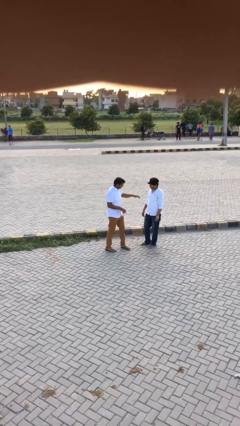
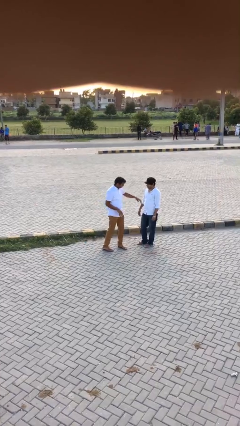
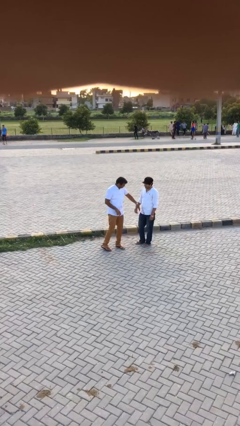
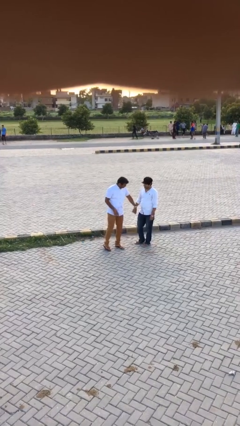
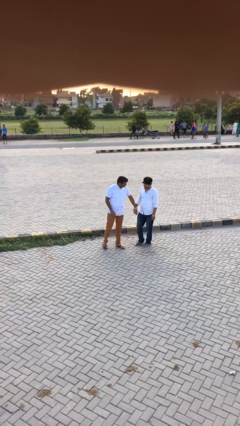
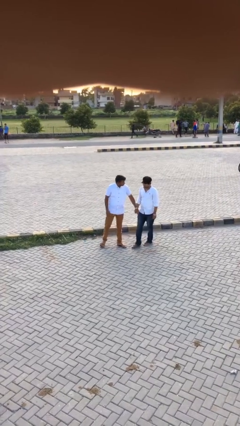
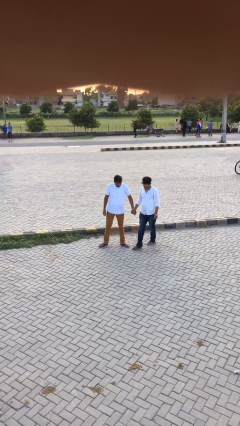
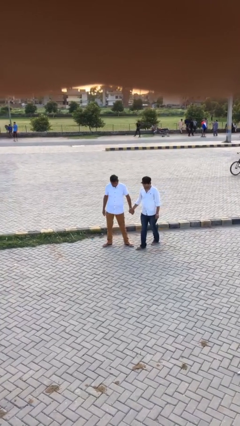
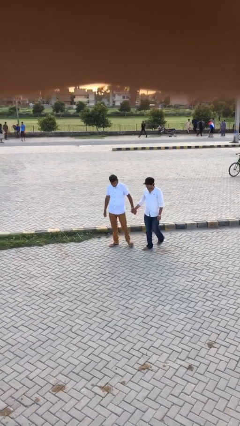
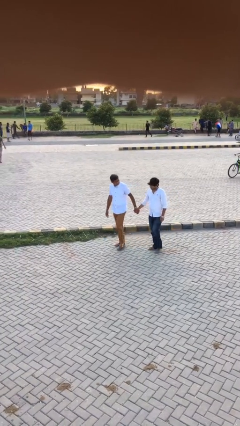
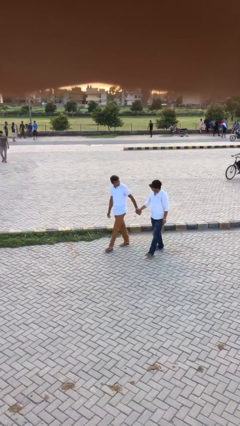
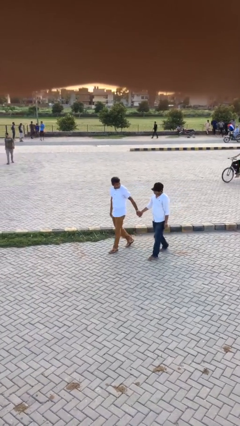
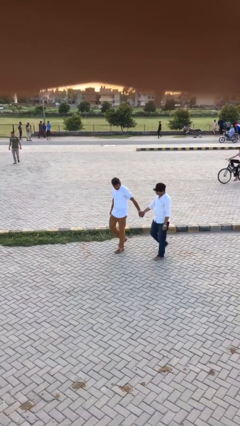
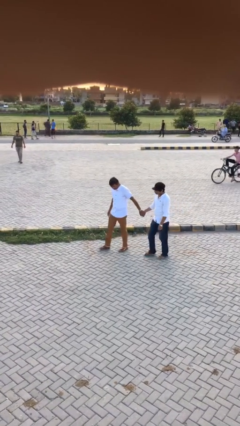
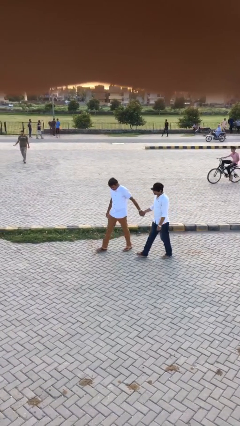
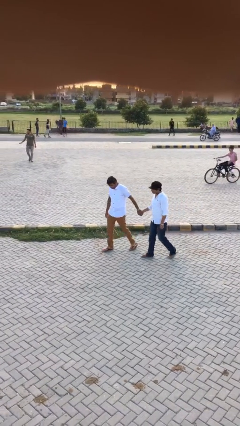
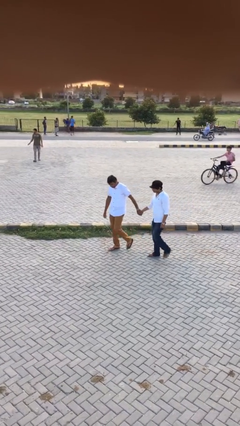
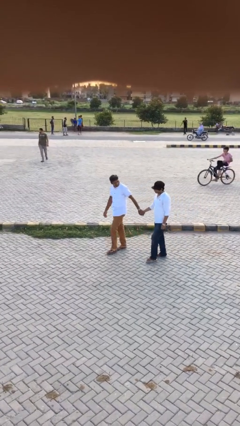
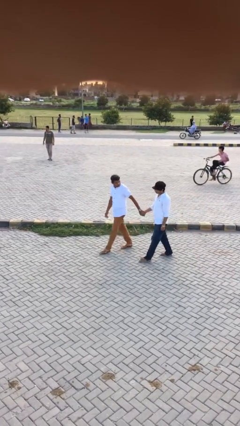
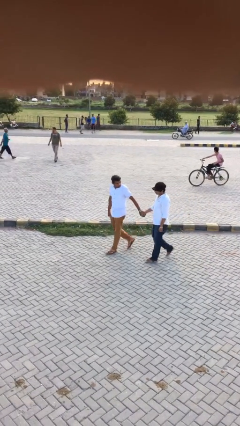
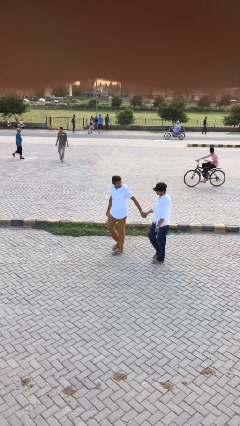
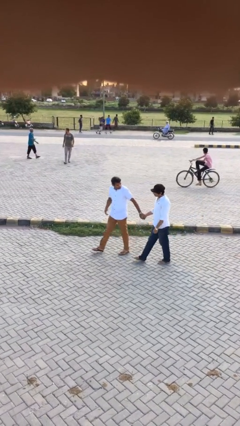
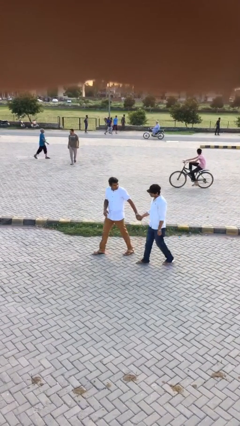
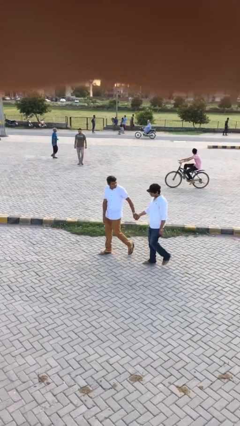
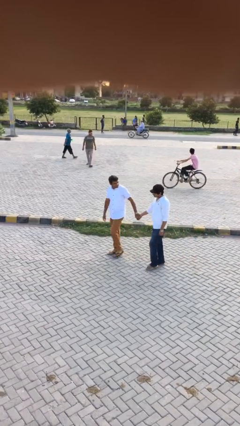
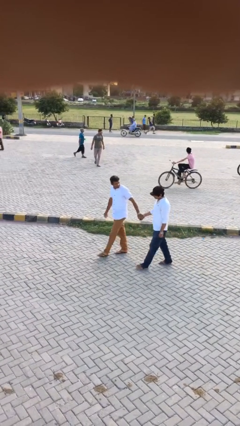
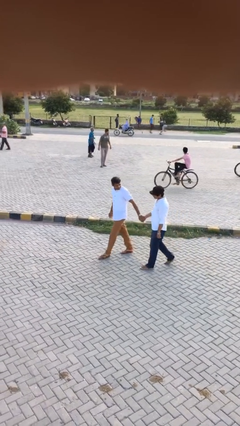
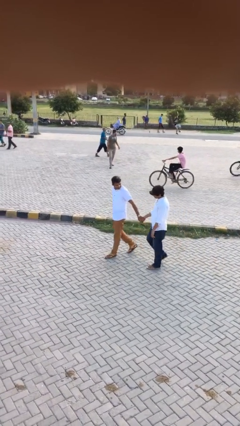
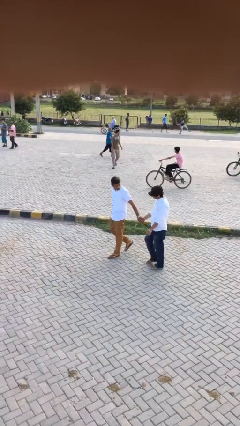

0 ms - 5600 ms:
person holds hand

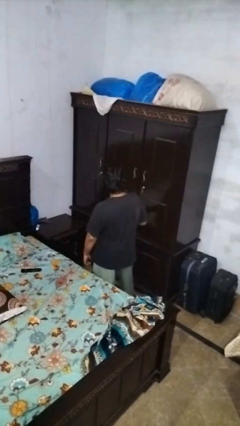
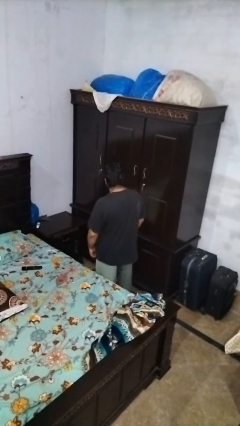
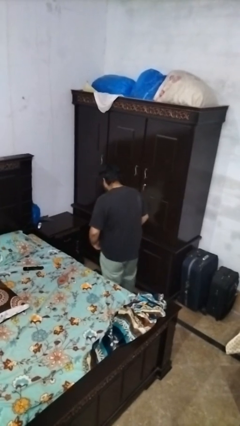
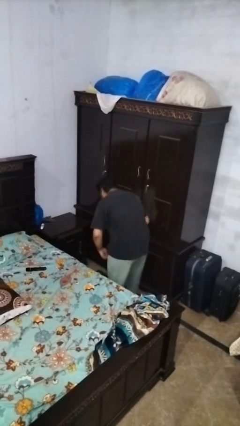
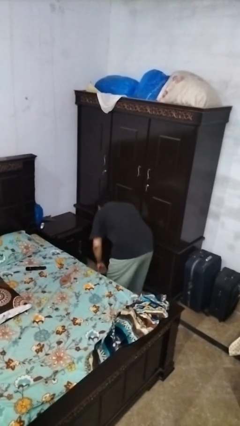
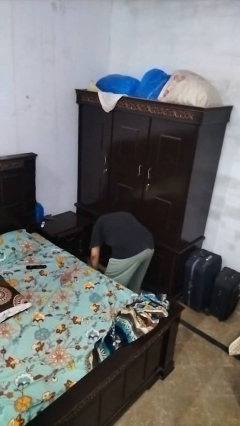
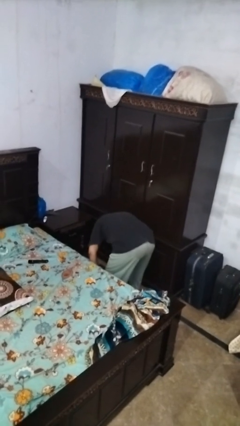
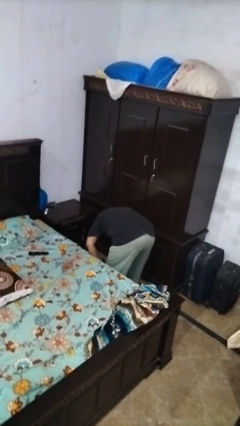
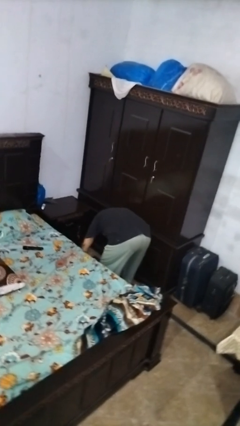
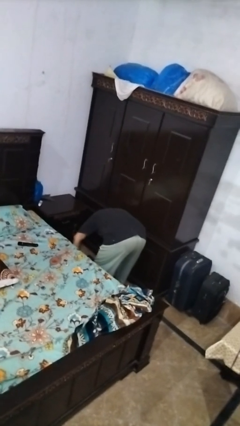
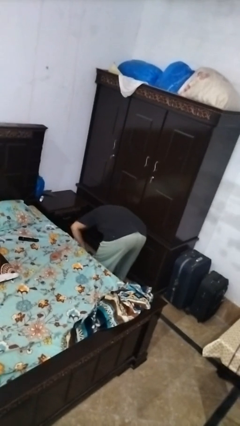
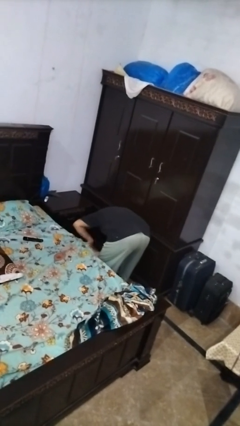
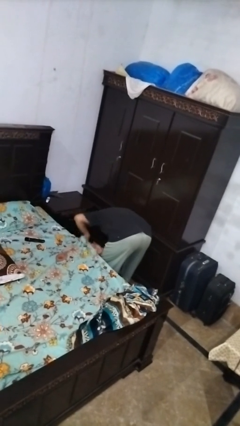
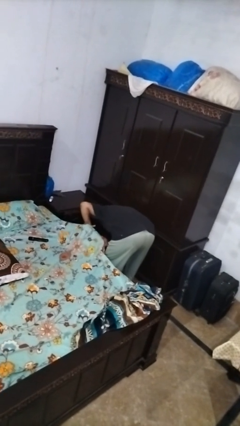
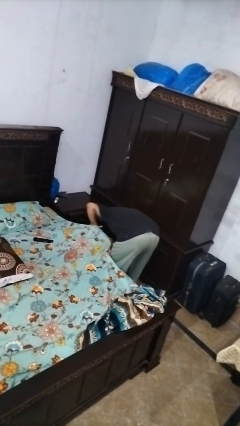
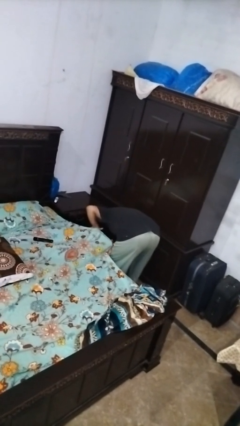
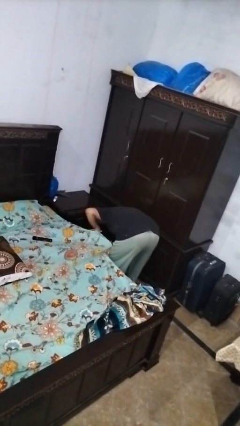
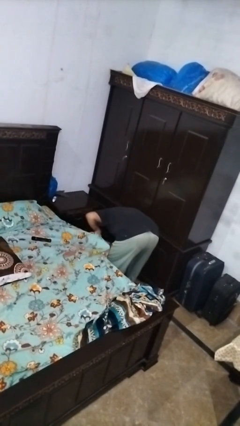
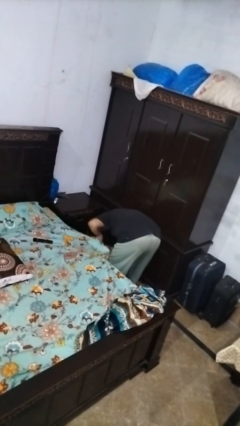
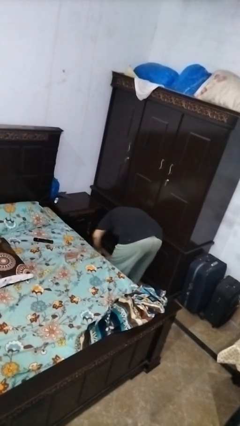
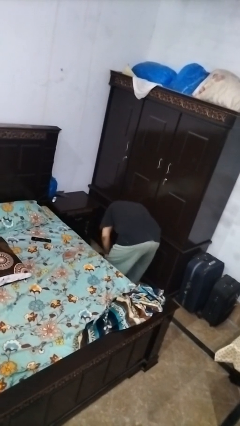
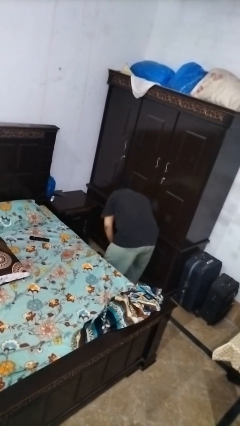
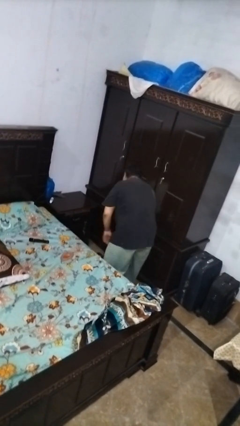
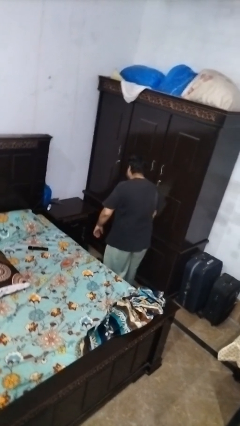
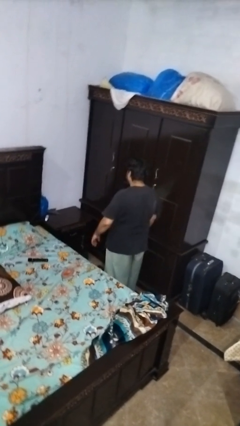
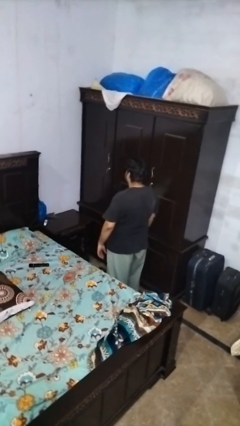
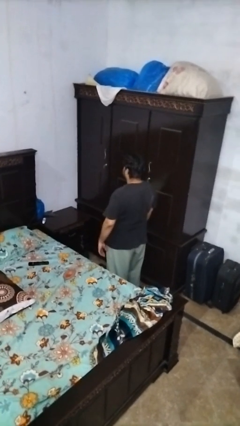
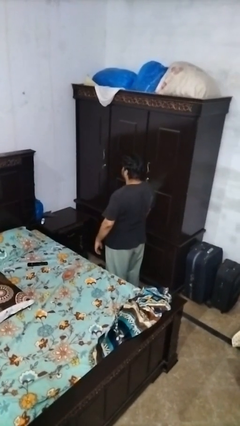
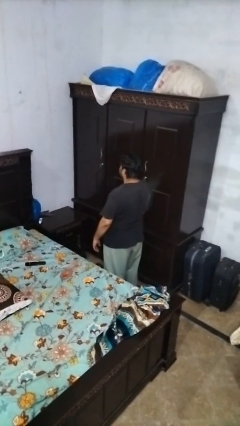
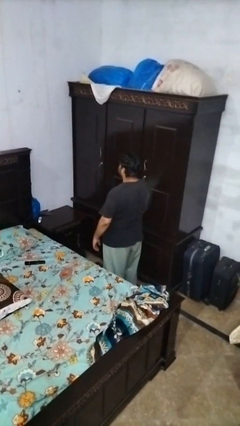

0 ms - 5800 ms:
person searches under bed

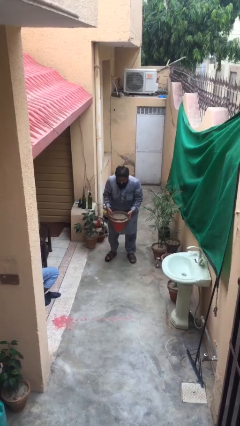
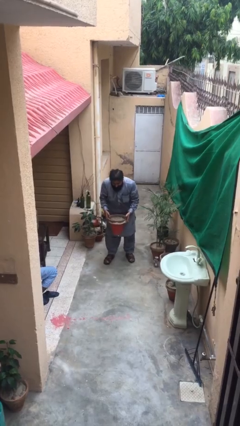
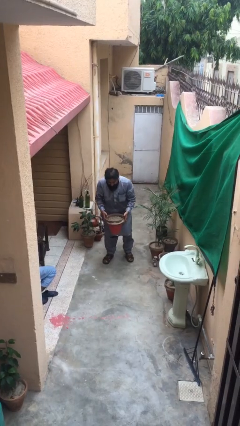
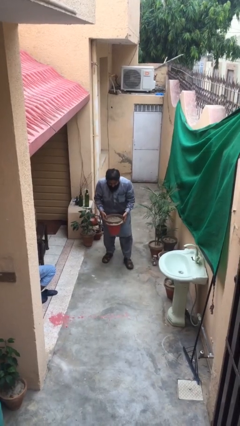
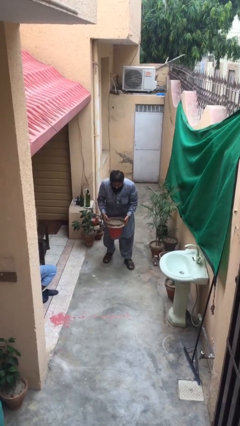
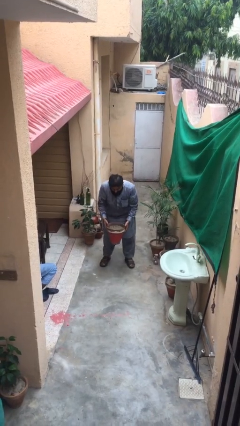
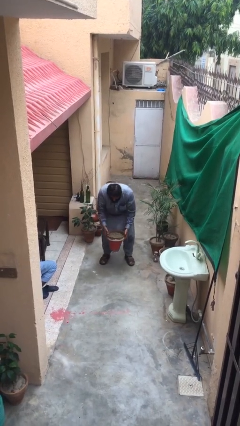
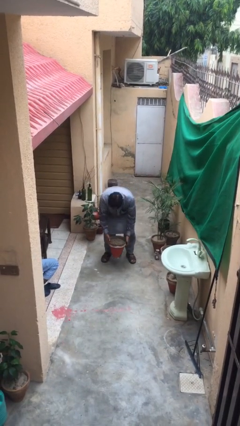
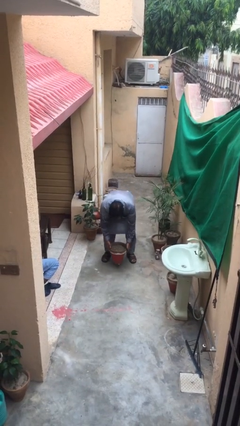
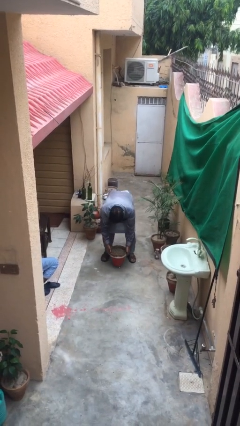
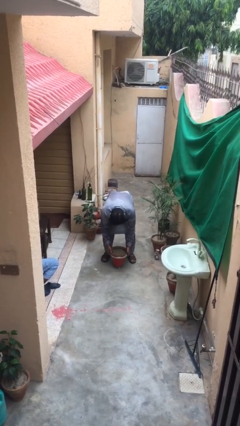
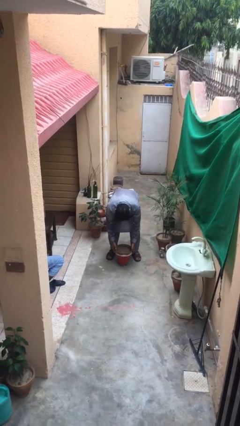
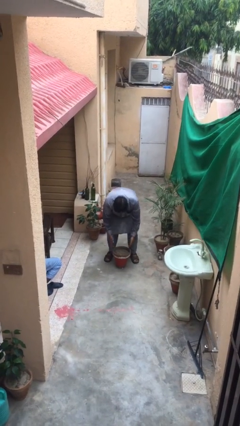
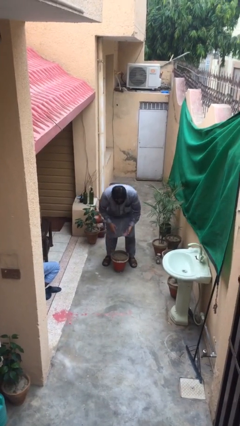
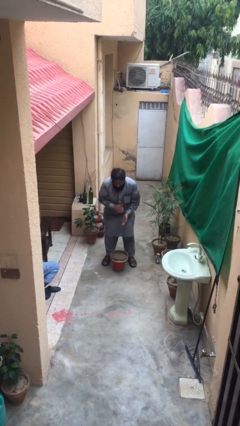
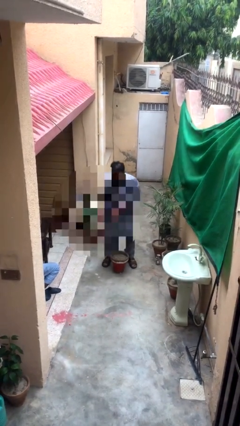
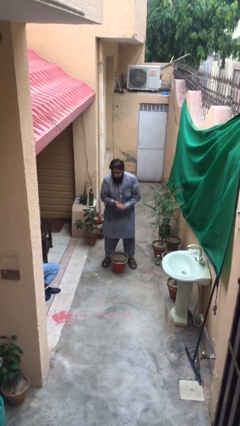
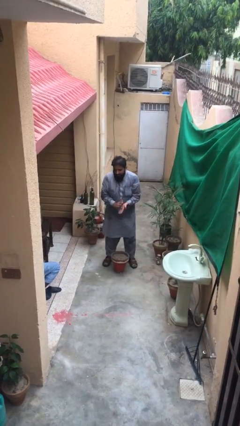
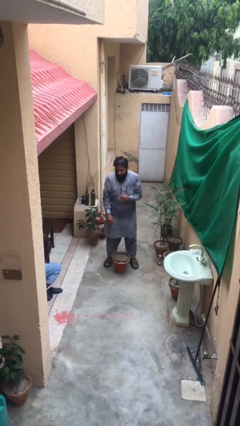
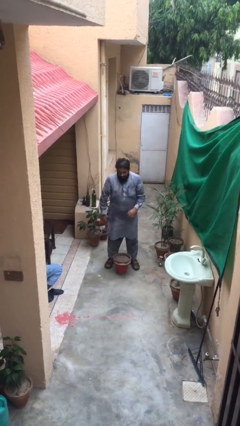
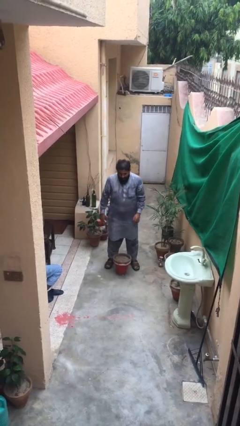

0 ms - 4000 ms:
person puts down object on floor

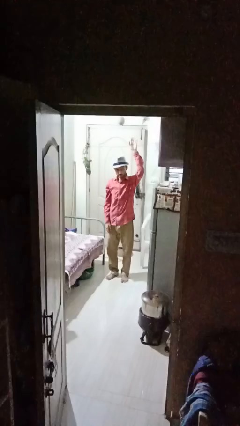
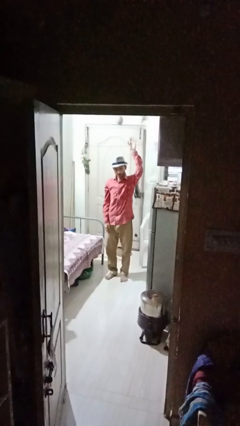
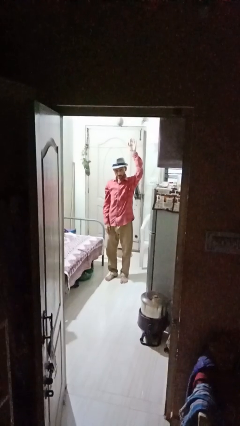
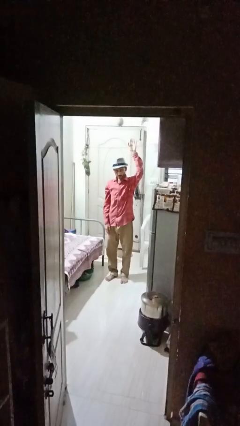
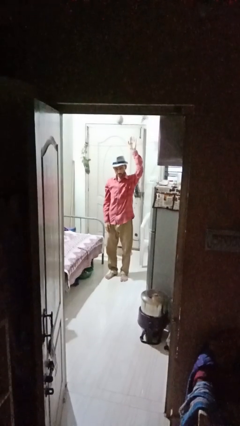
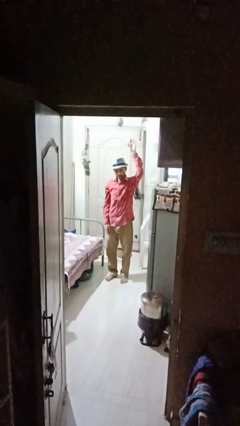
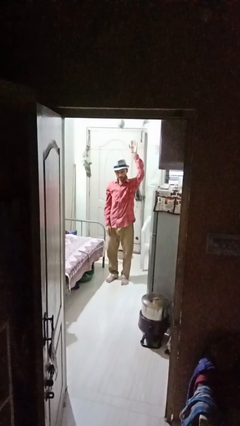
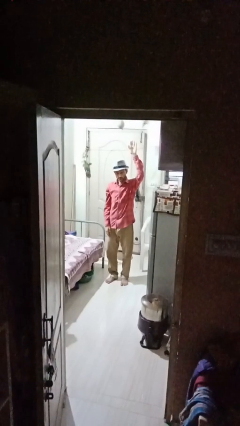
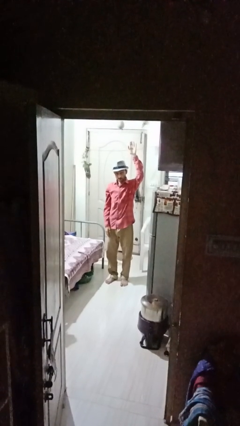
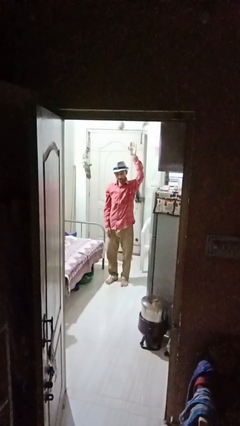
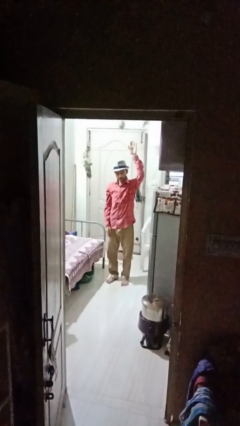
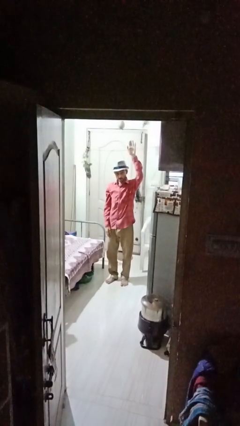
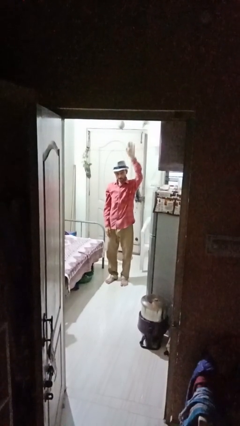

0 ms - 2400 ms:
person gestures raise hand
